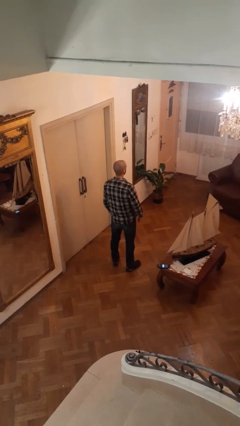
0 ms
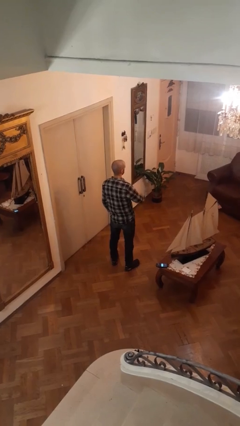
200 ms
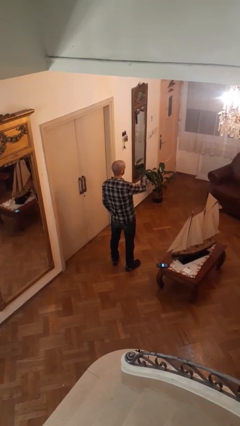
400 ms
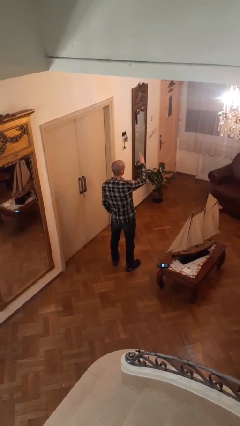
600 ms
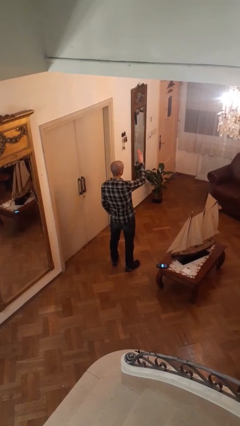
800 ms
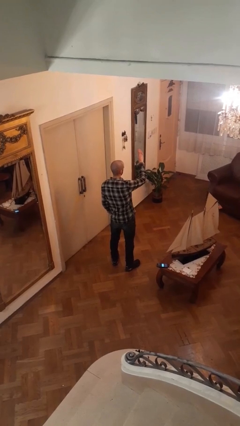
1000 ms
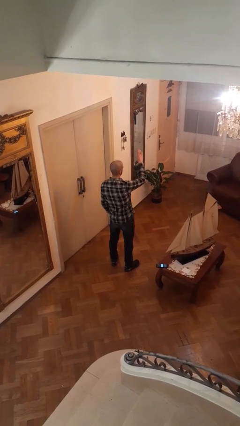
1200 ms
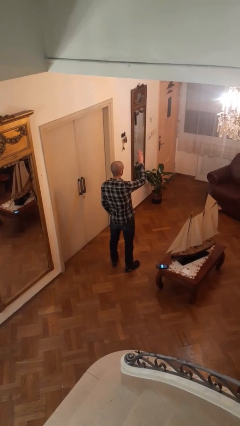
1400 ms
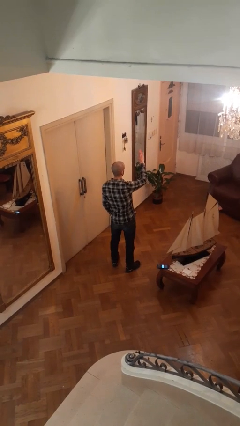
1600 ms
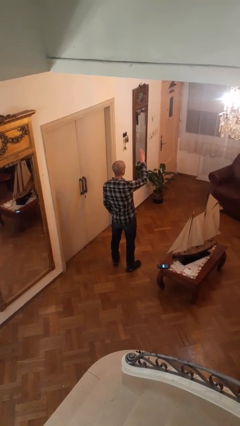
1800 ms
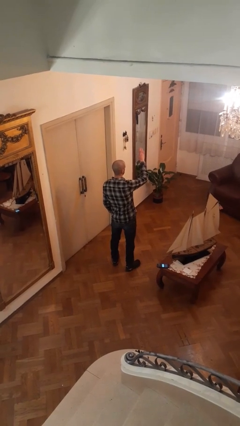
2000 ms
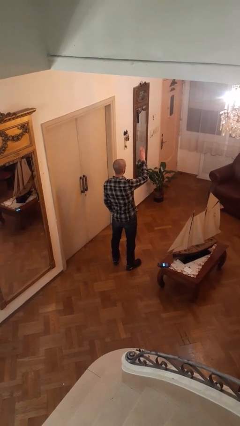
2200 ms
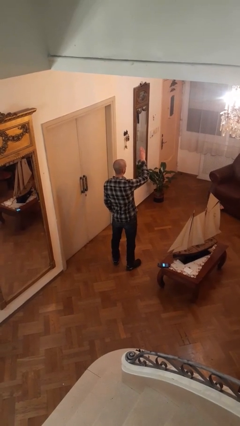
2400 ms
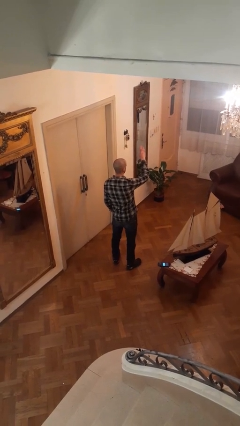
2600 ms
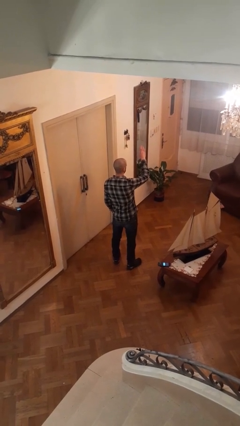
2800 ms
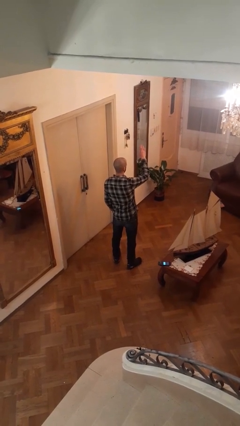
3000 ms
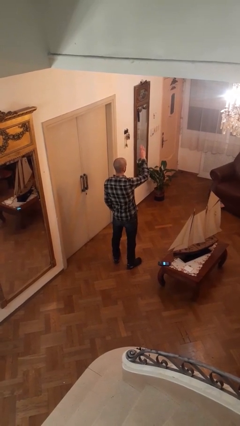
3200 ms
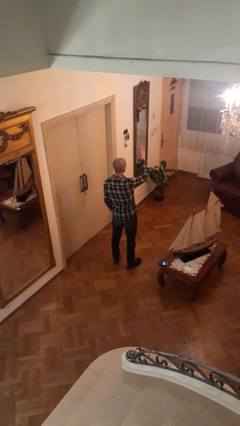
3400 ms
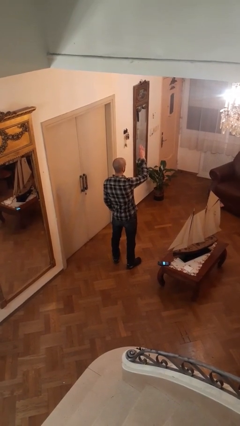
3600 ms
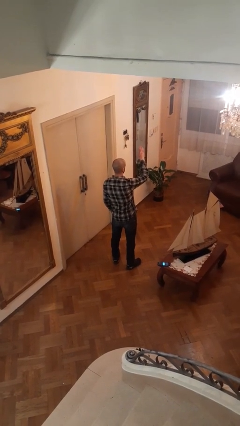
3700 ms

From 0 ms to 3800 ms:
person gestures swipe up

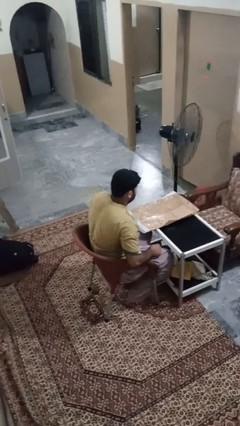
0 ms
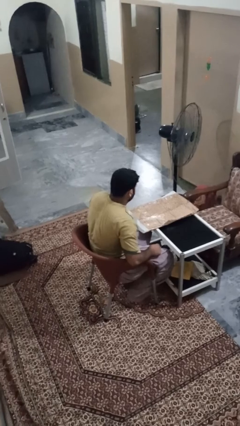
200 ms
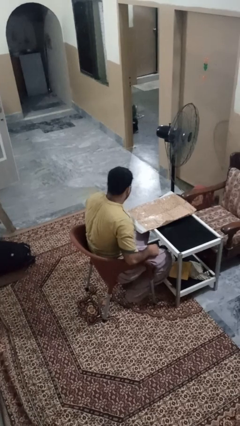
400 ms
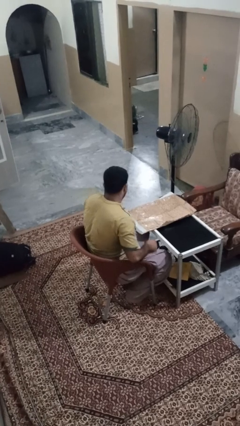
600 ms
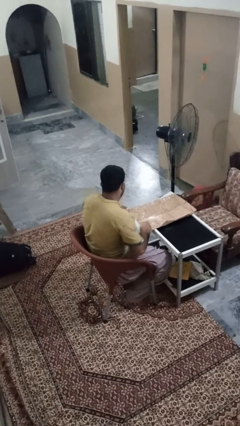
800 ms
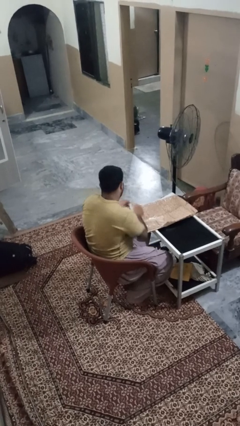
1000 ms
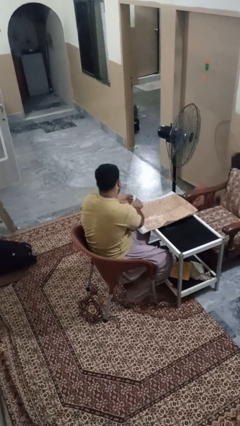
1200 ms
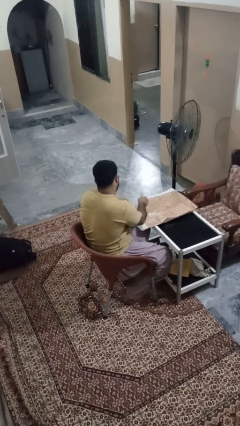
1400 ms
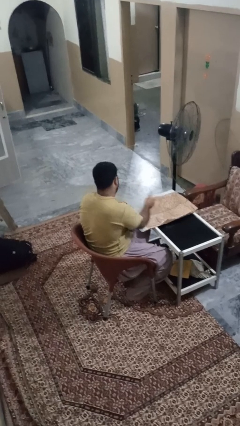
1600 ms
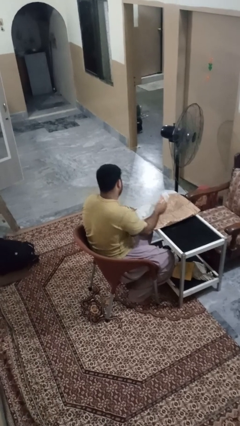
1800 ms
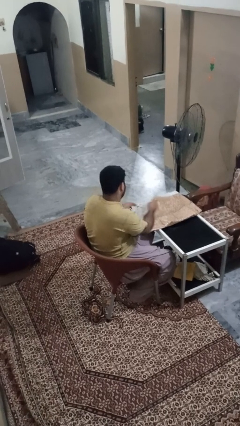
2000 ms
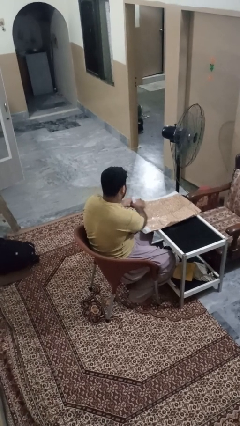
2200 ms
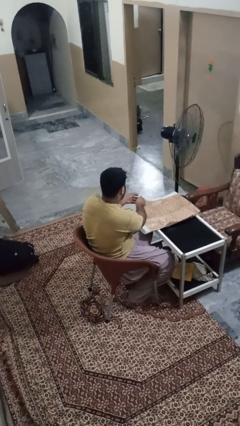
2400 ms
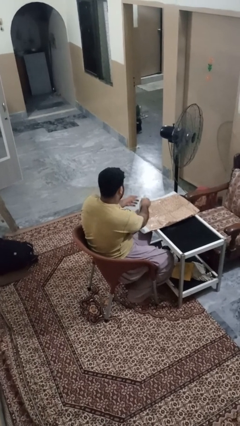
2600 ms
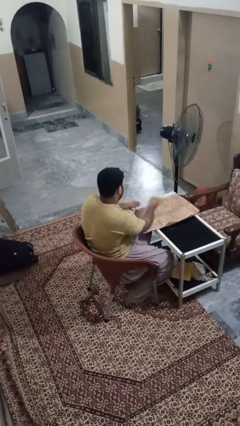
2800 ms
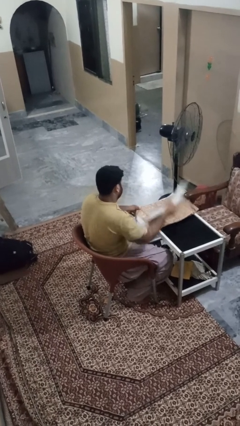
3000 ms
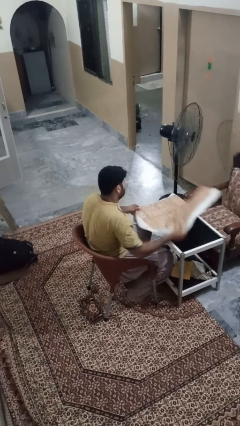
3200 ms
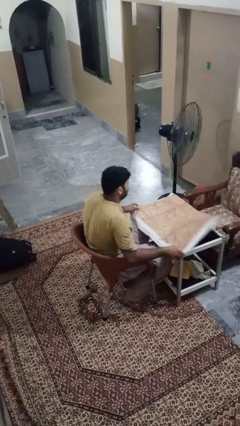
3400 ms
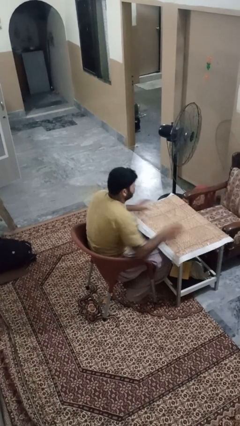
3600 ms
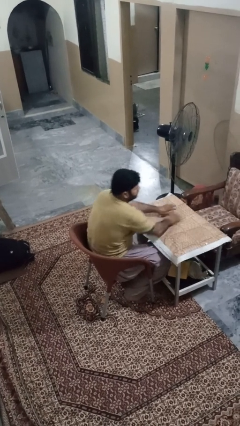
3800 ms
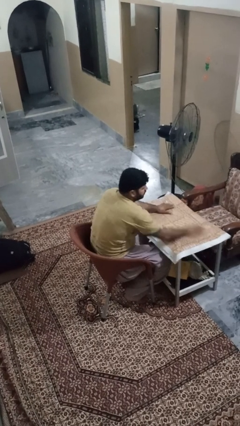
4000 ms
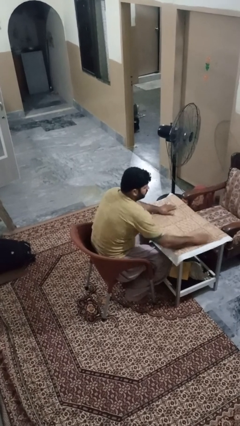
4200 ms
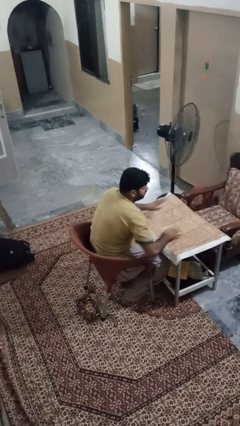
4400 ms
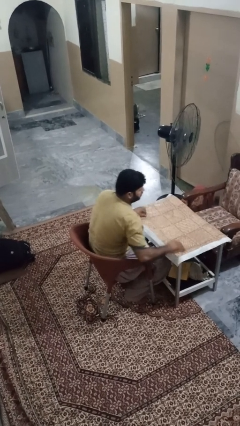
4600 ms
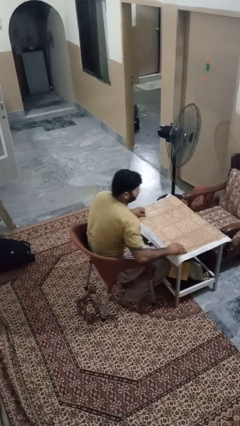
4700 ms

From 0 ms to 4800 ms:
person spreads tablecloth

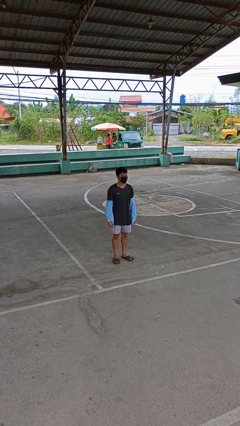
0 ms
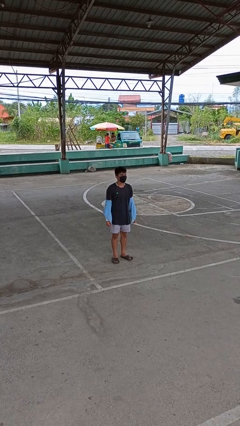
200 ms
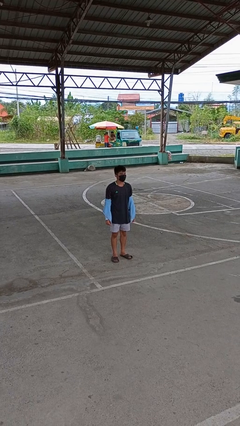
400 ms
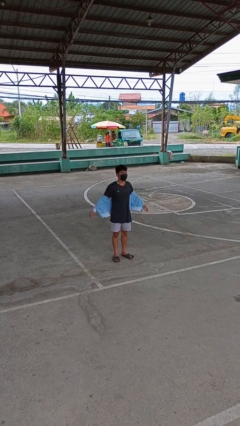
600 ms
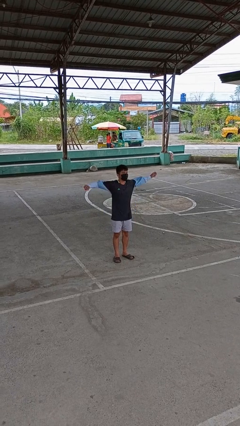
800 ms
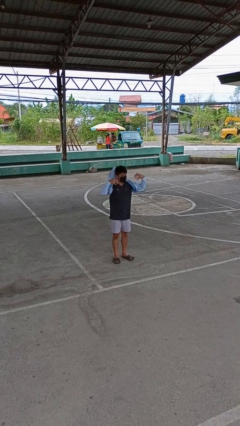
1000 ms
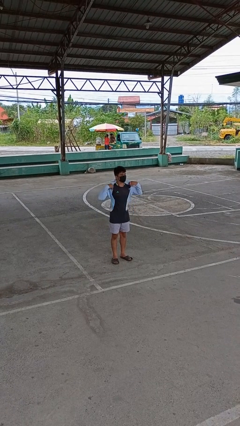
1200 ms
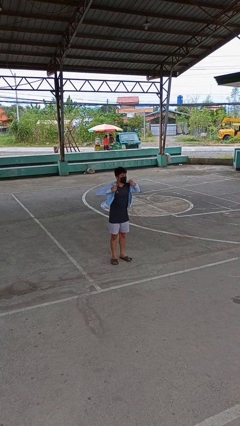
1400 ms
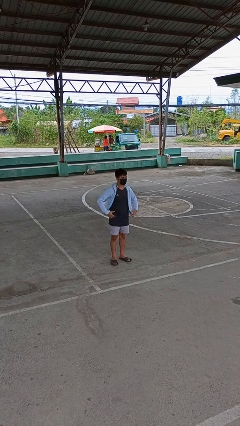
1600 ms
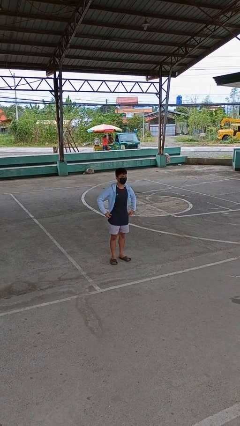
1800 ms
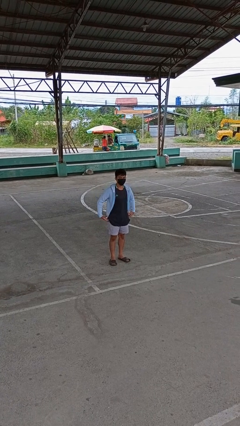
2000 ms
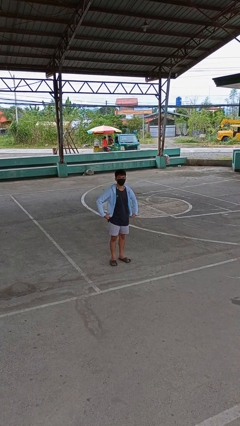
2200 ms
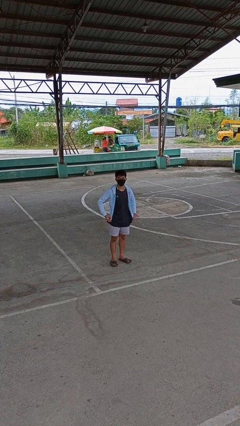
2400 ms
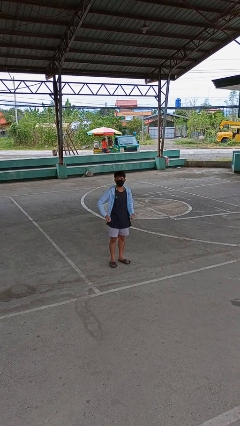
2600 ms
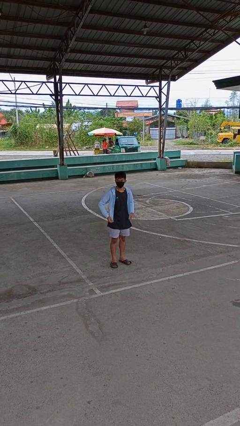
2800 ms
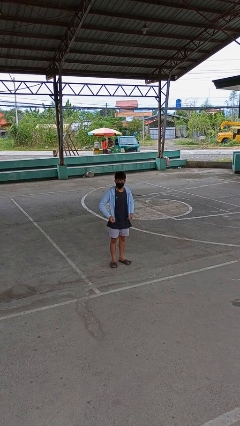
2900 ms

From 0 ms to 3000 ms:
person puts on jacket

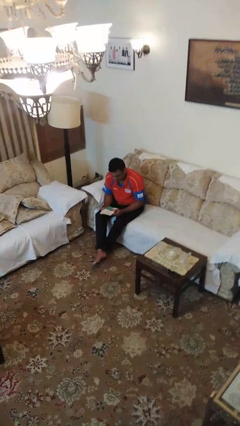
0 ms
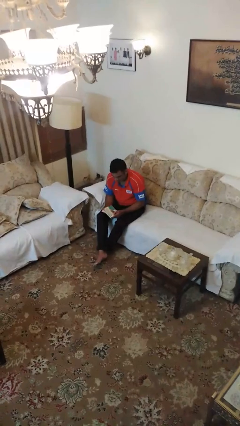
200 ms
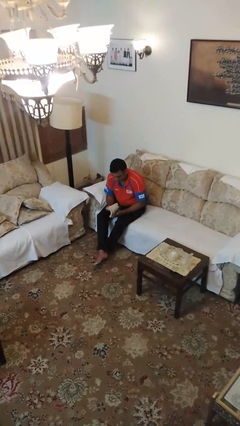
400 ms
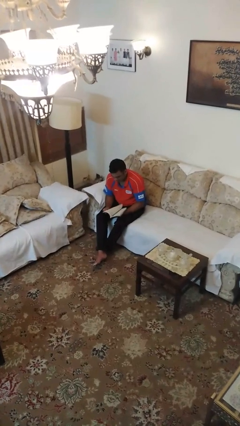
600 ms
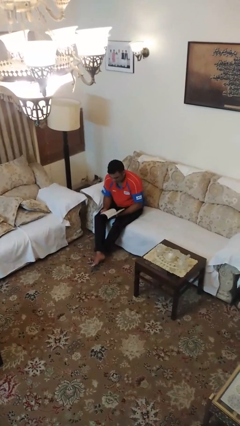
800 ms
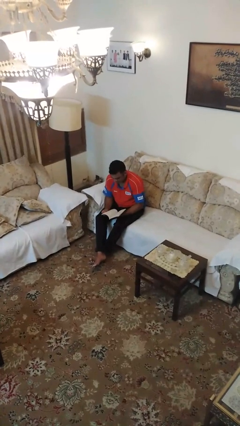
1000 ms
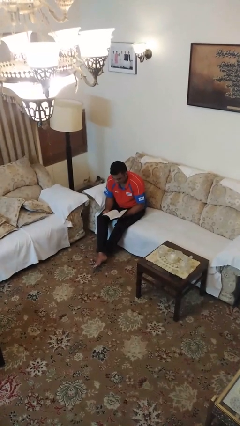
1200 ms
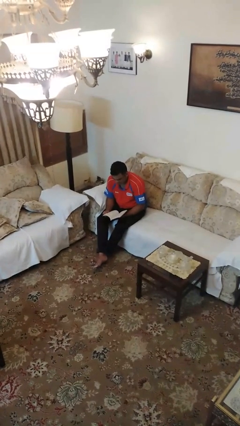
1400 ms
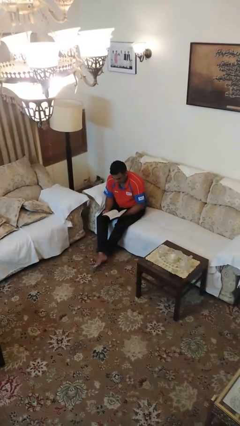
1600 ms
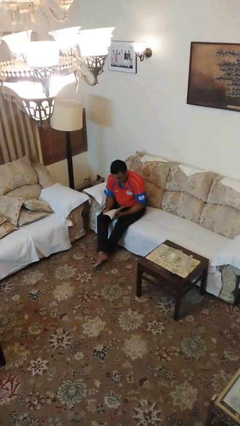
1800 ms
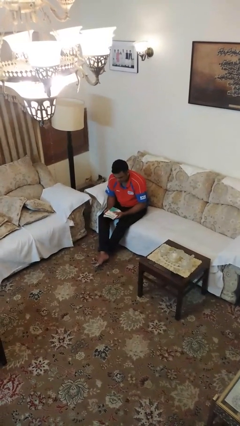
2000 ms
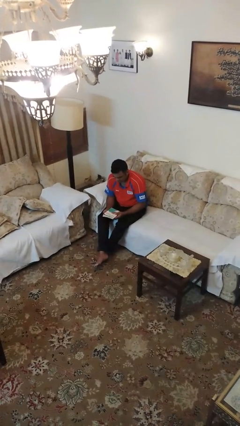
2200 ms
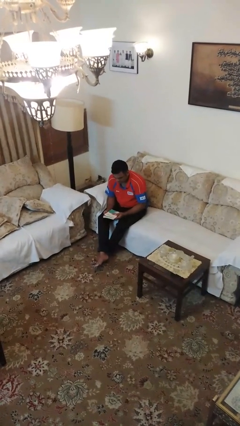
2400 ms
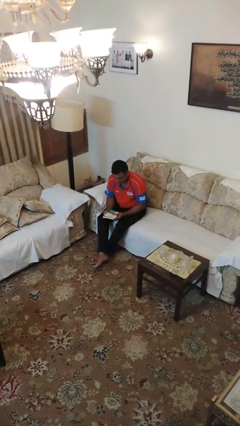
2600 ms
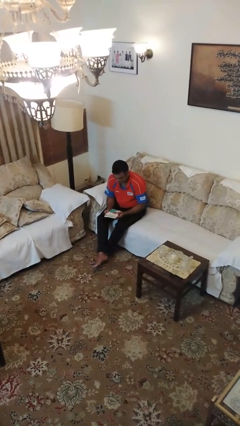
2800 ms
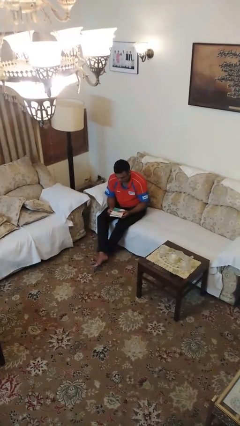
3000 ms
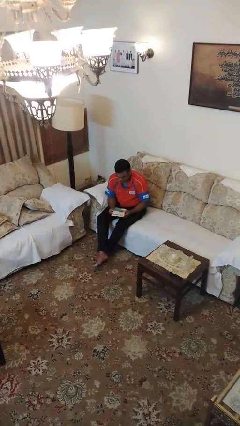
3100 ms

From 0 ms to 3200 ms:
person reads magazine

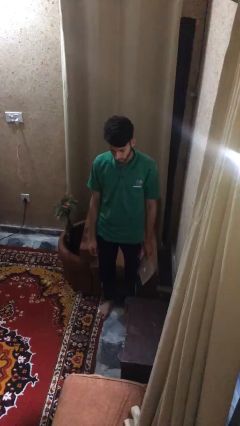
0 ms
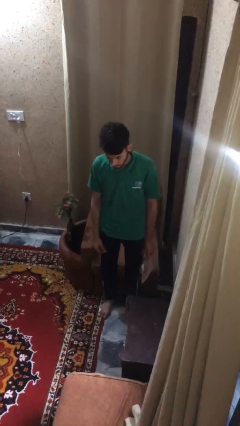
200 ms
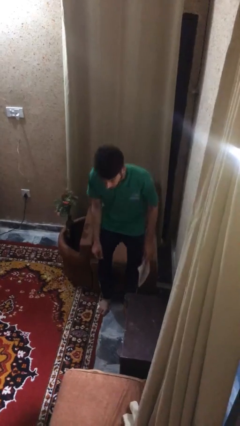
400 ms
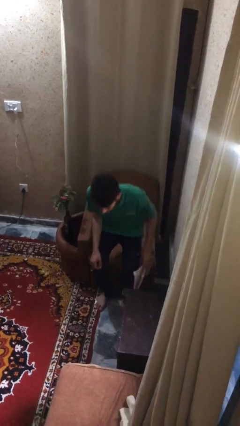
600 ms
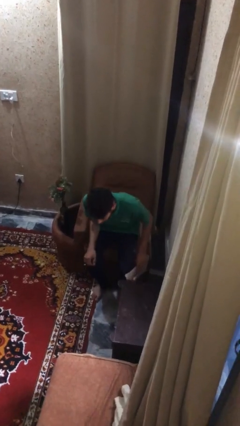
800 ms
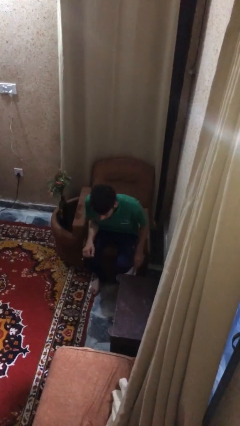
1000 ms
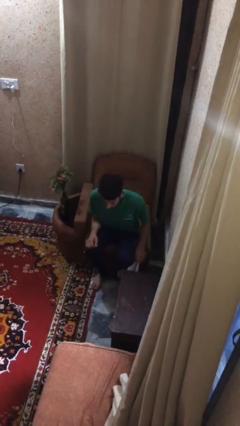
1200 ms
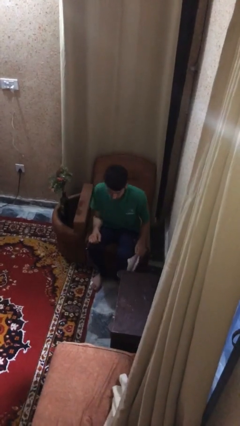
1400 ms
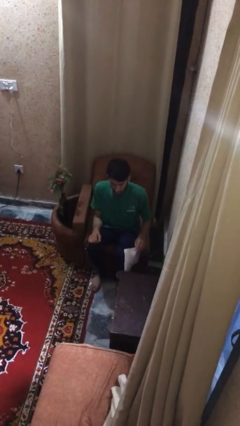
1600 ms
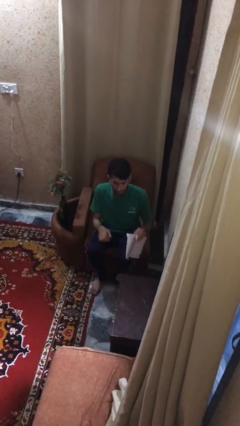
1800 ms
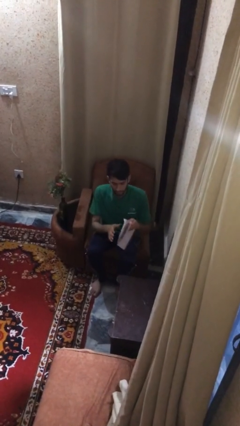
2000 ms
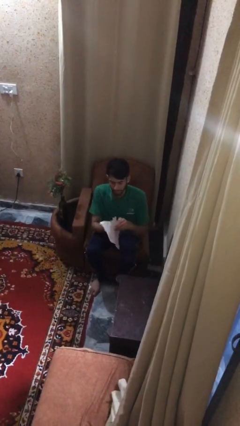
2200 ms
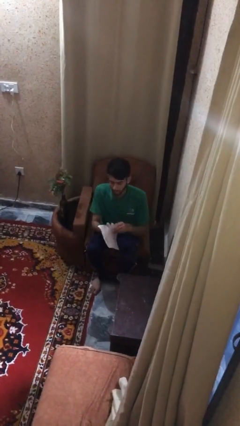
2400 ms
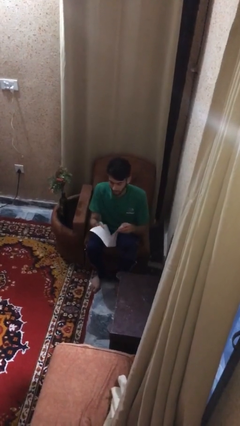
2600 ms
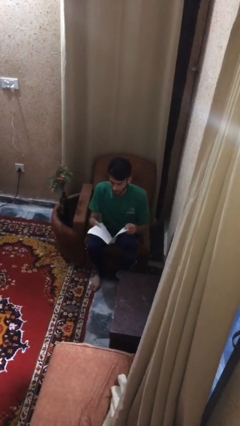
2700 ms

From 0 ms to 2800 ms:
person sits down
